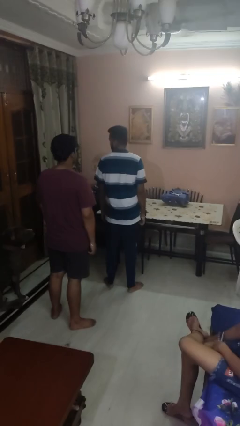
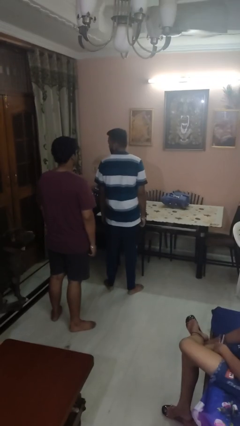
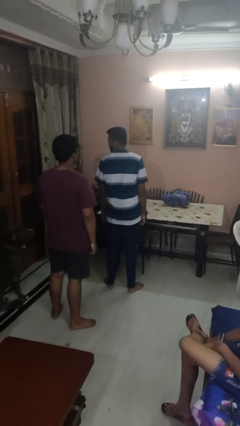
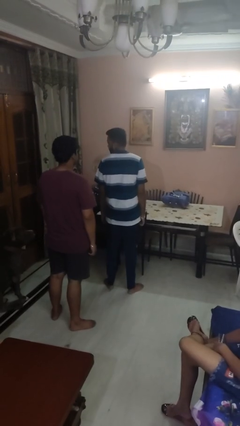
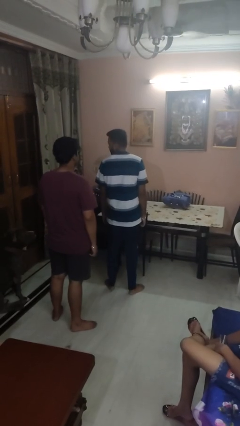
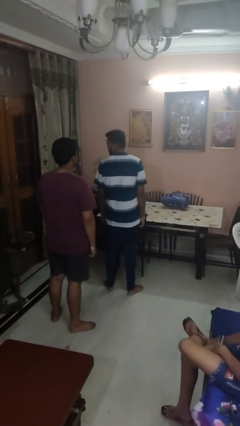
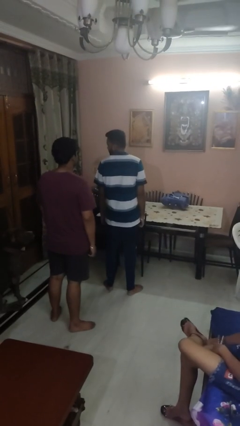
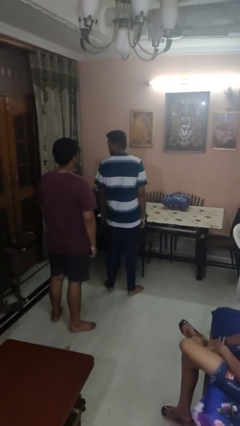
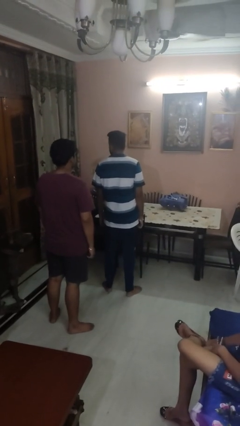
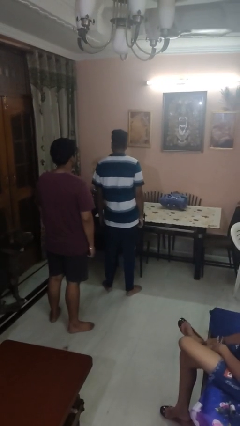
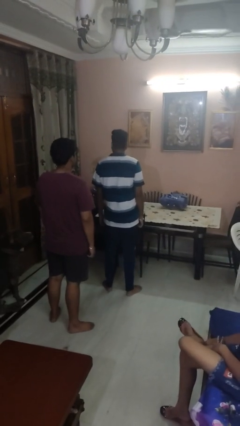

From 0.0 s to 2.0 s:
person looks over shoulder

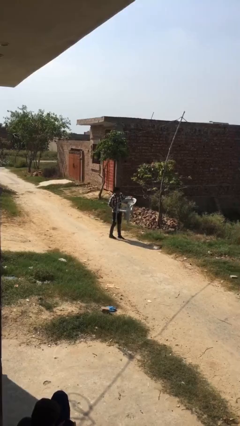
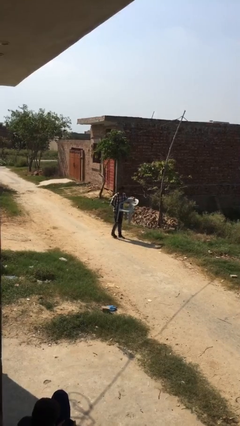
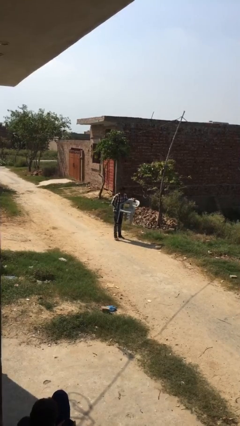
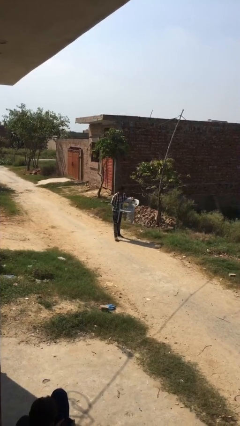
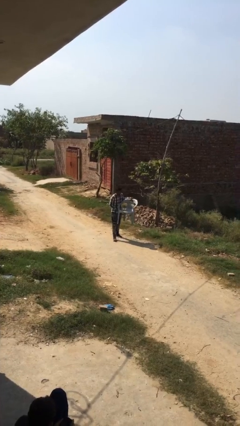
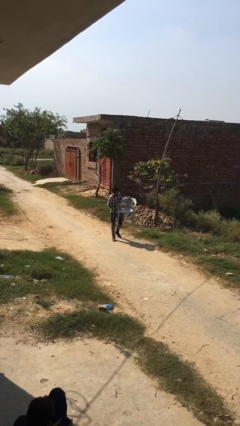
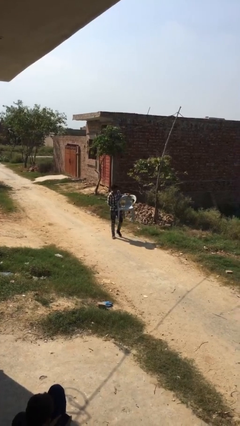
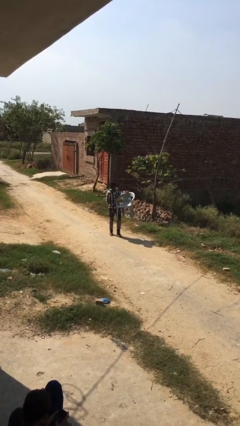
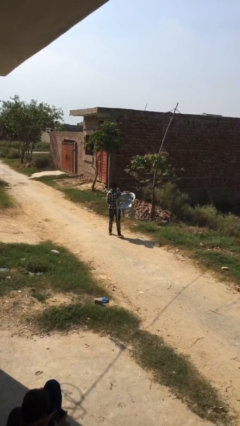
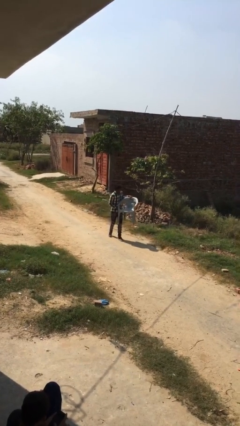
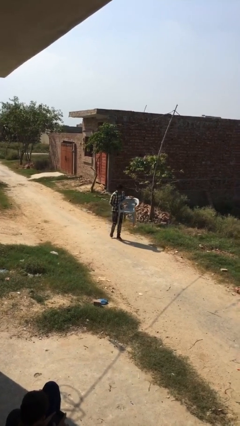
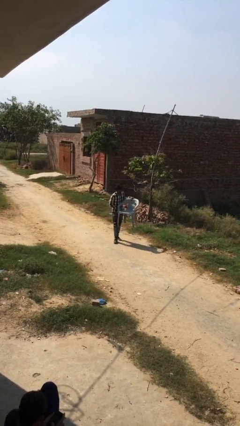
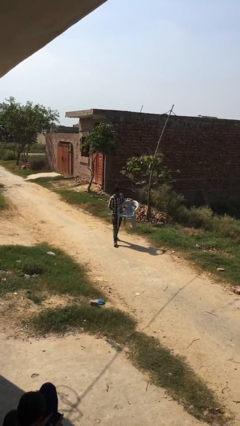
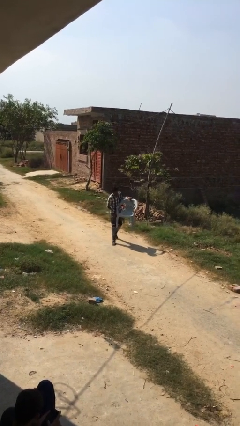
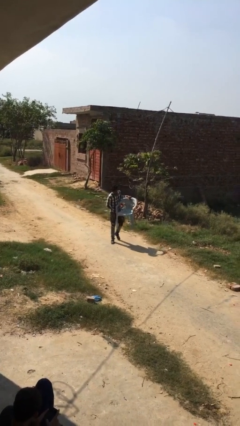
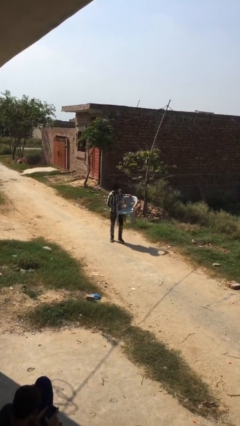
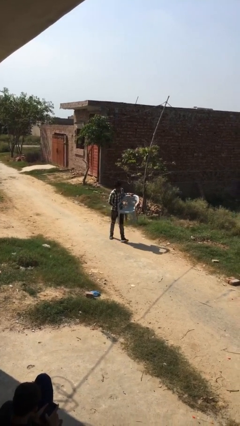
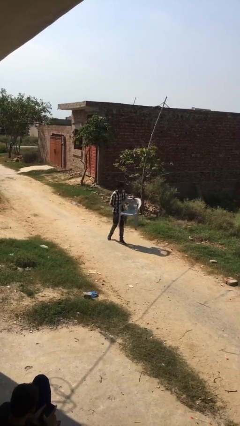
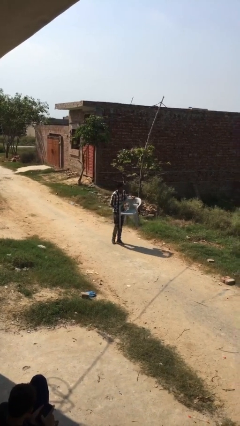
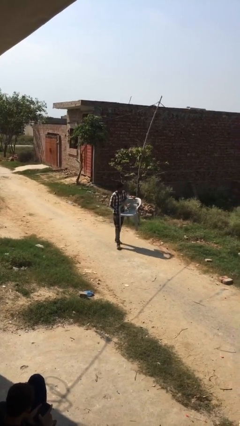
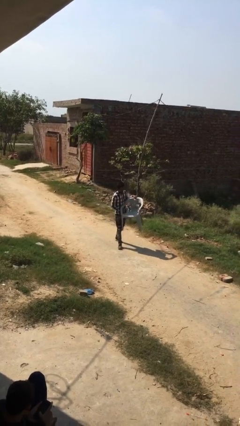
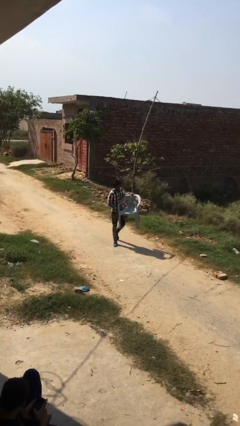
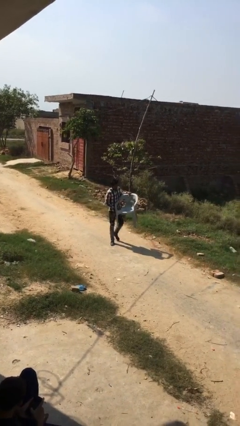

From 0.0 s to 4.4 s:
person carries heavy object

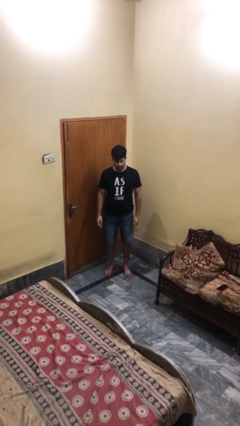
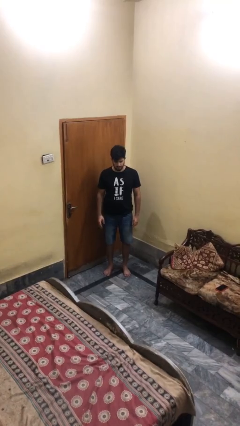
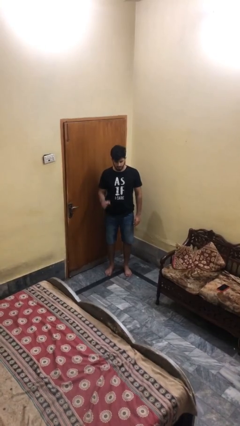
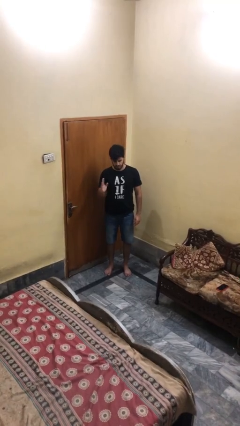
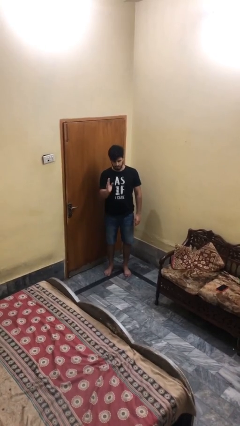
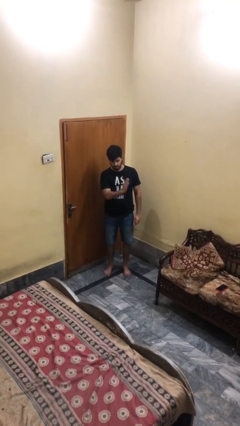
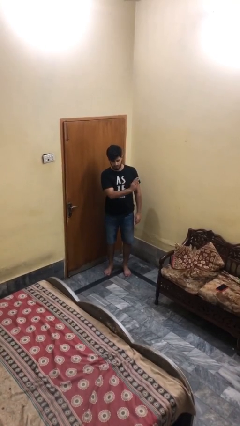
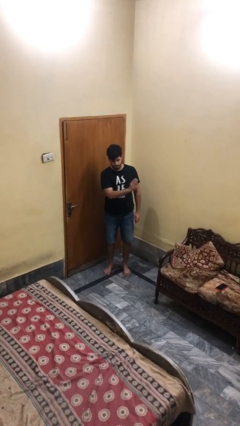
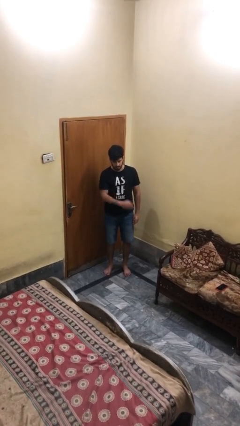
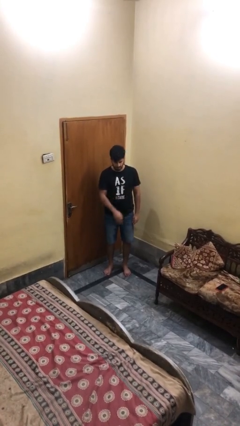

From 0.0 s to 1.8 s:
person gestures swipe left

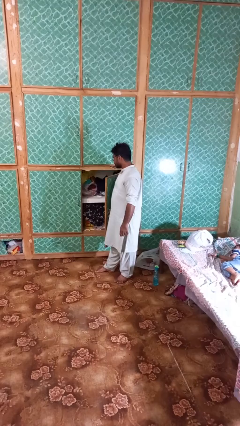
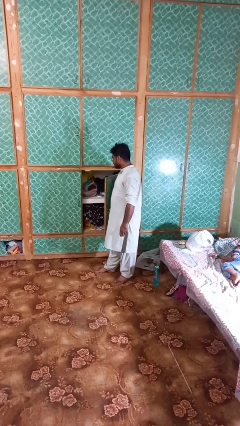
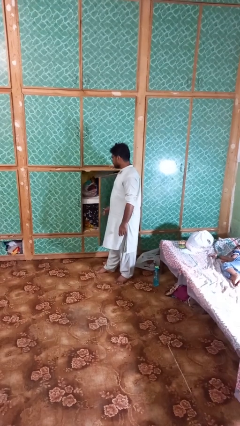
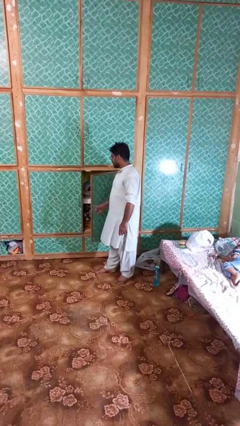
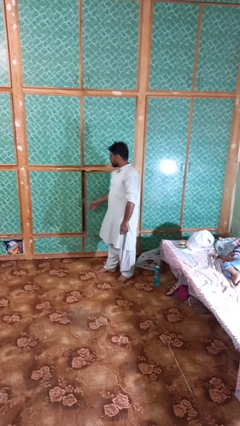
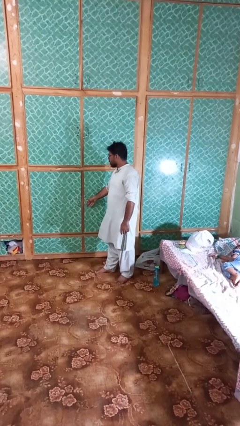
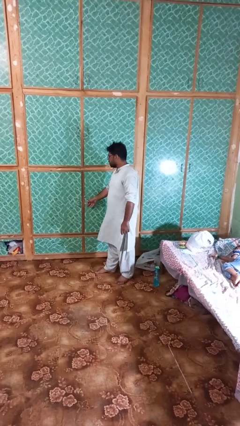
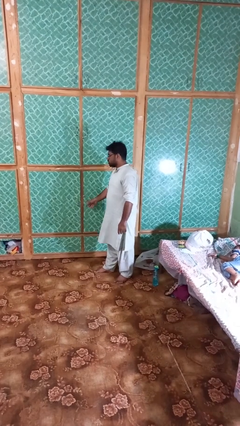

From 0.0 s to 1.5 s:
person closes closet door

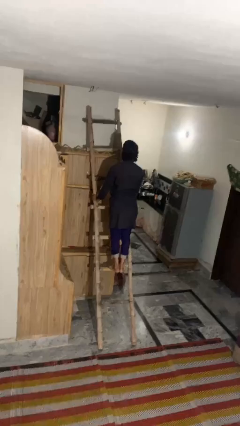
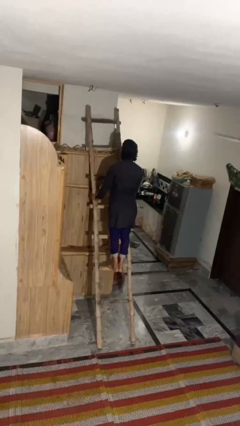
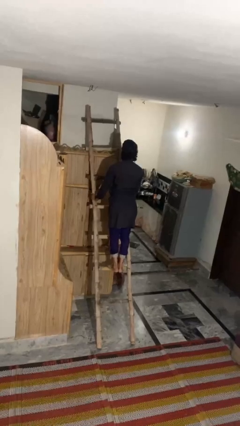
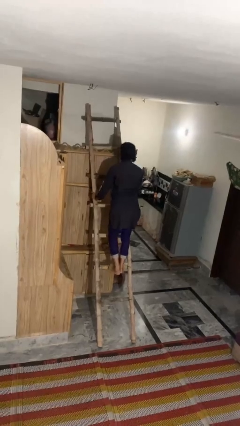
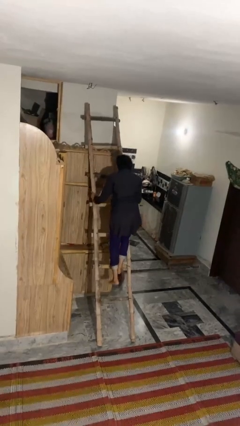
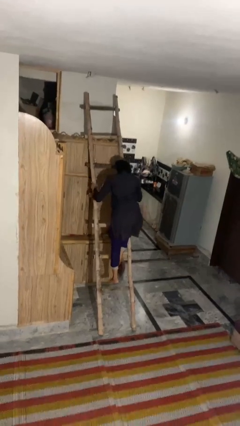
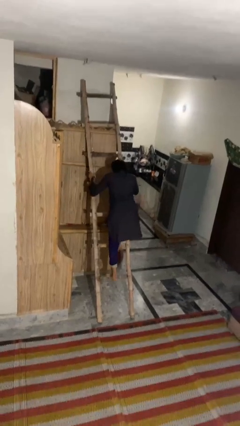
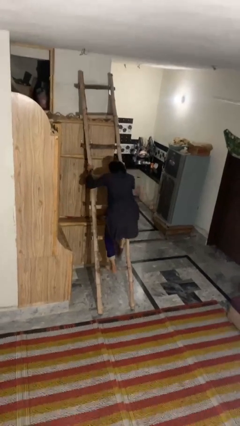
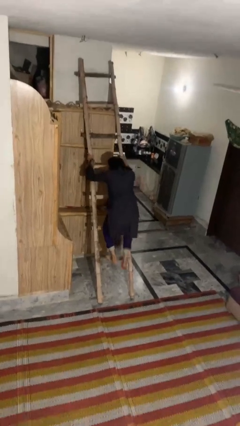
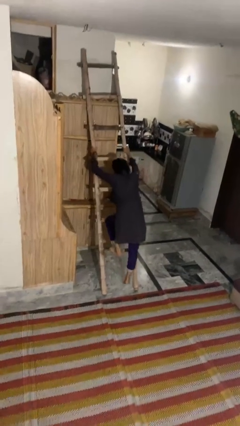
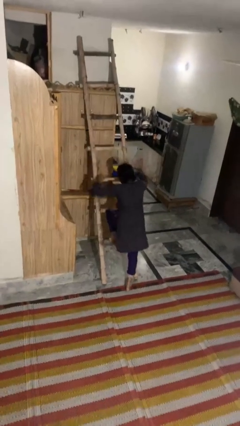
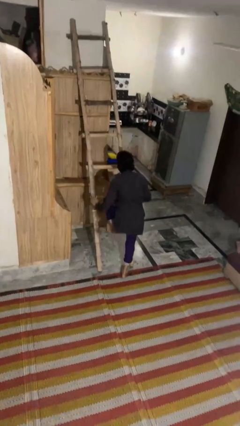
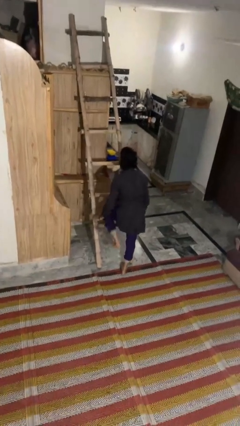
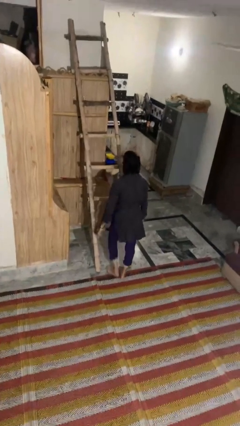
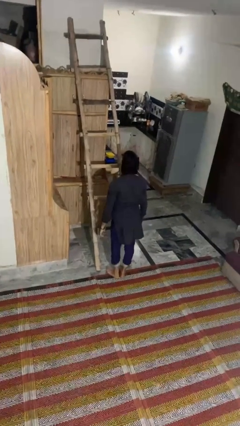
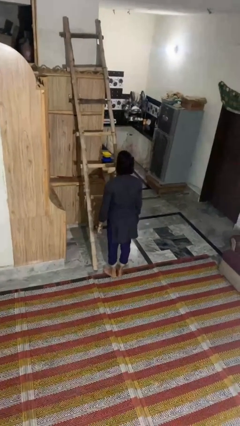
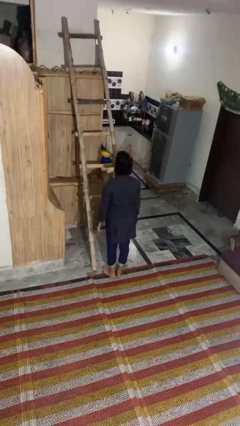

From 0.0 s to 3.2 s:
person climbs down ladder

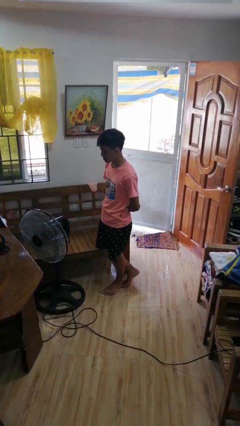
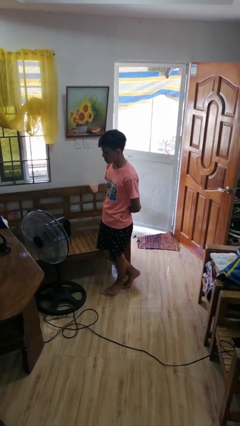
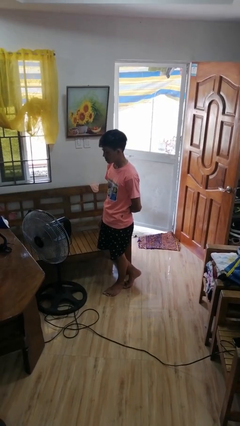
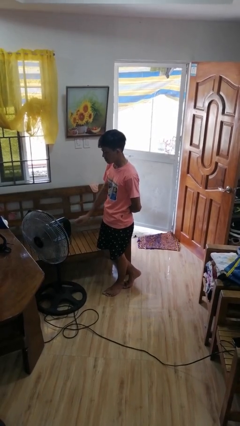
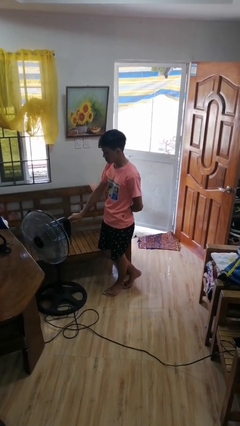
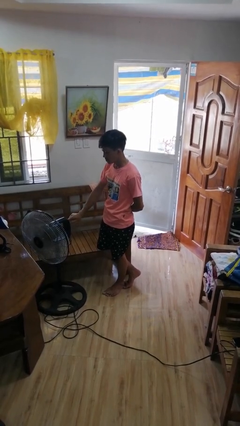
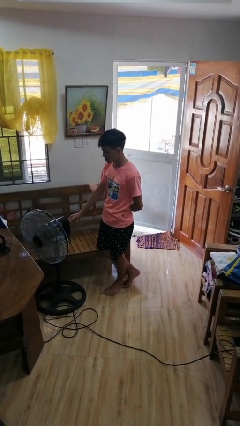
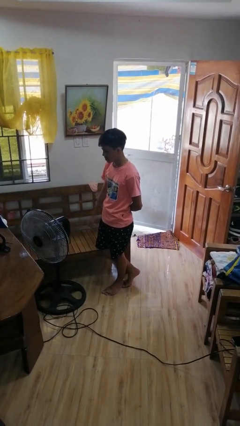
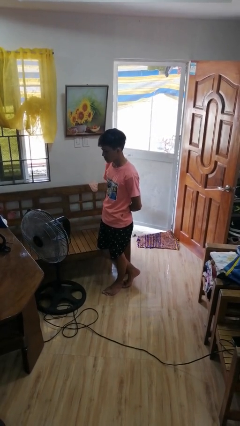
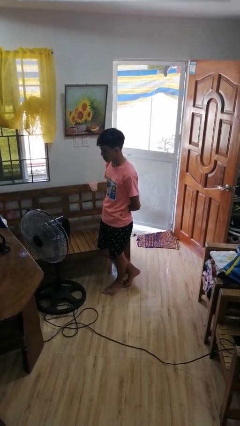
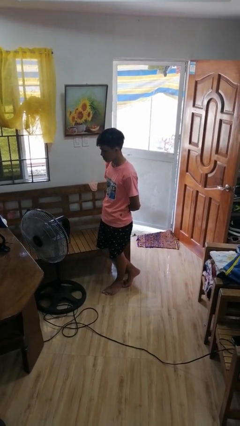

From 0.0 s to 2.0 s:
person turns off fan

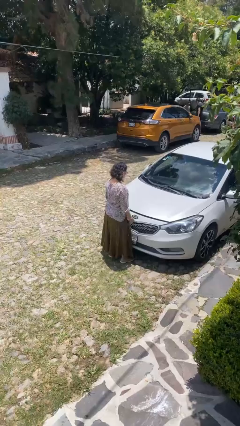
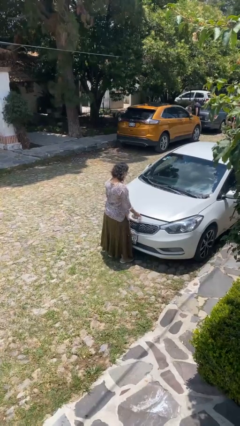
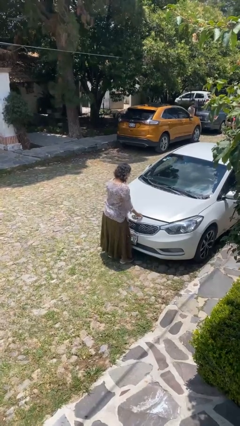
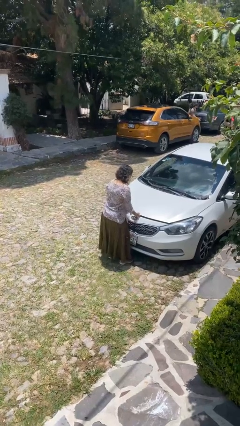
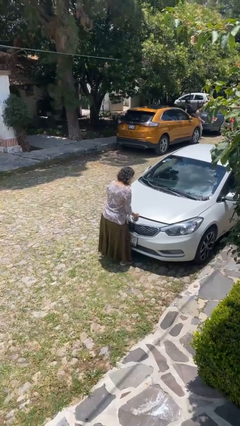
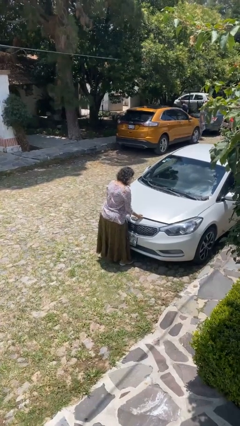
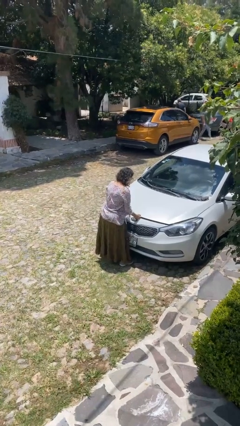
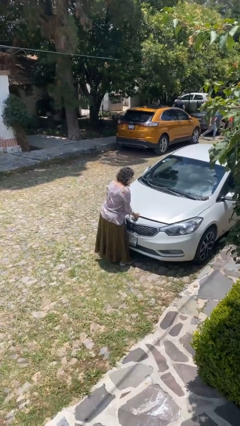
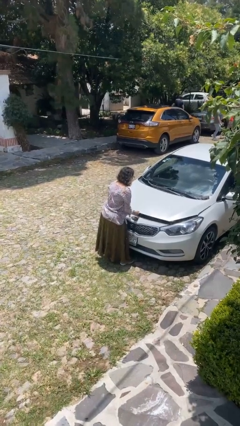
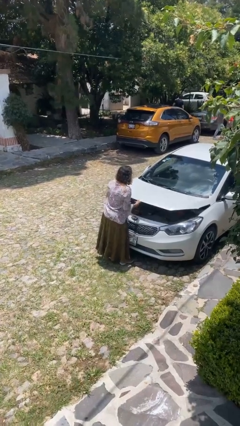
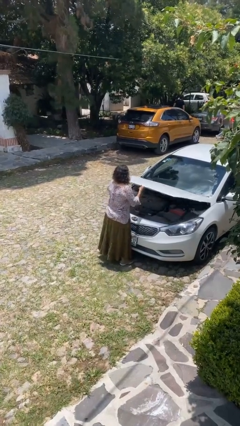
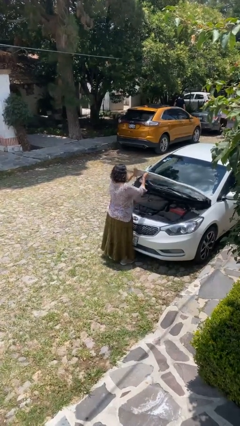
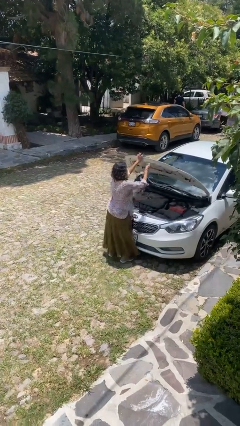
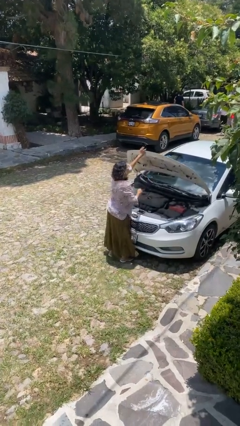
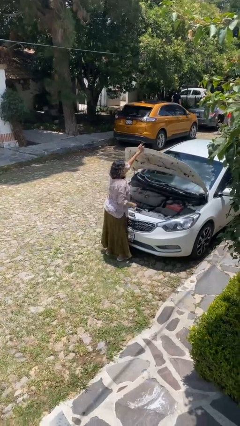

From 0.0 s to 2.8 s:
person opens car hood
